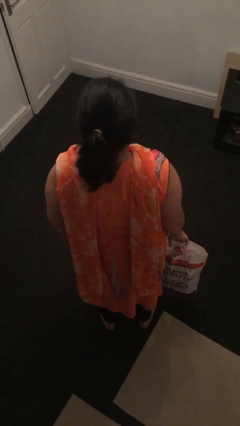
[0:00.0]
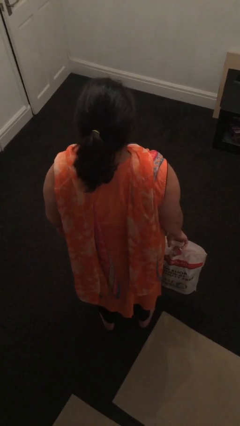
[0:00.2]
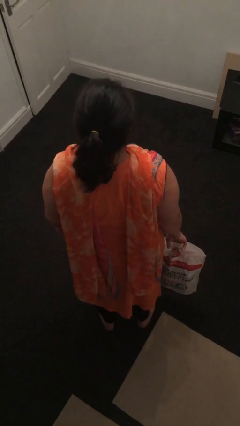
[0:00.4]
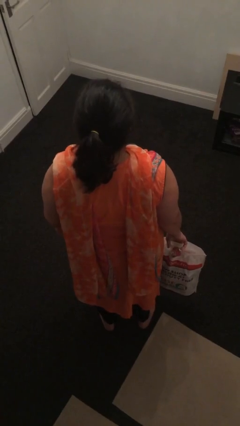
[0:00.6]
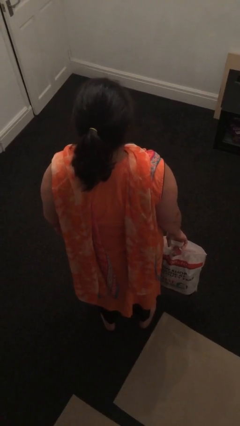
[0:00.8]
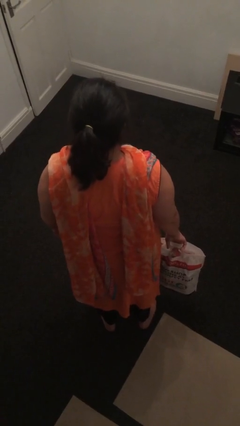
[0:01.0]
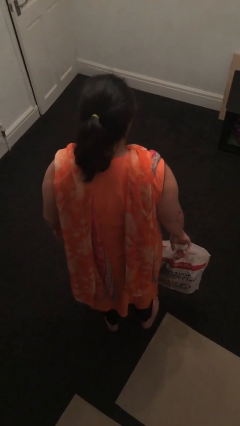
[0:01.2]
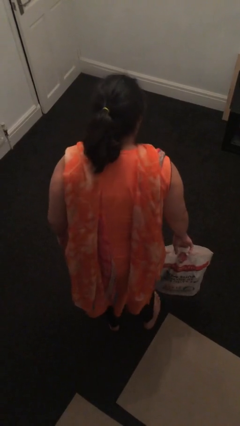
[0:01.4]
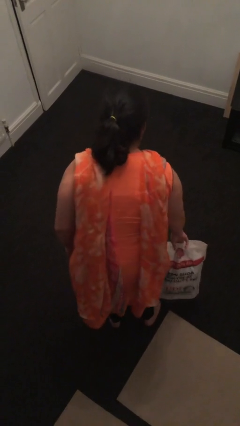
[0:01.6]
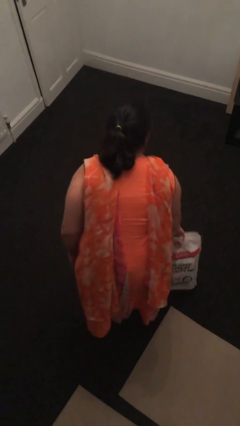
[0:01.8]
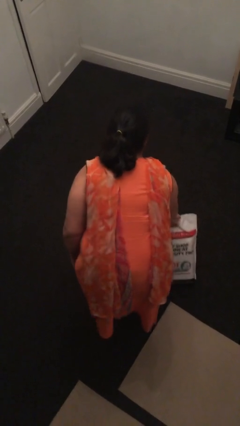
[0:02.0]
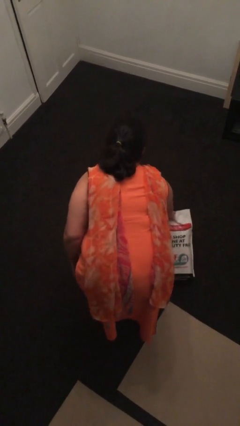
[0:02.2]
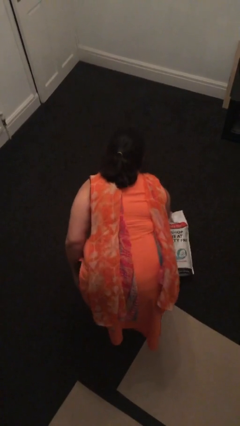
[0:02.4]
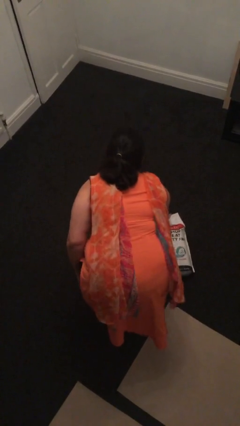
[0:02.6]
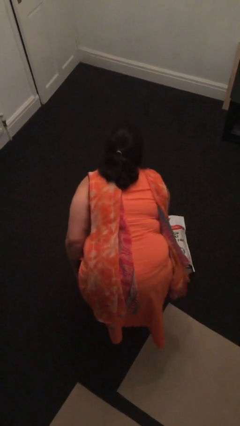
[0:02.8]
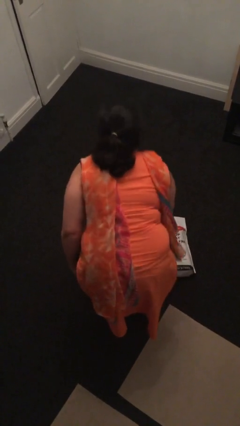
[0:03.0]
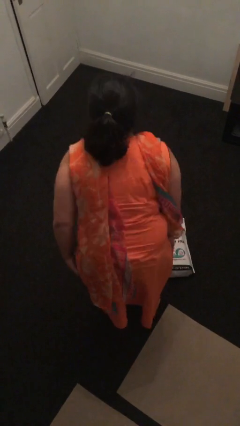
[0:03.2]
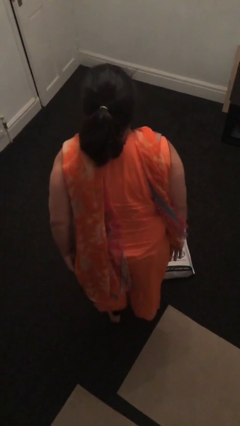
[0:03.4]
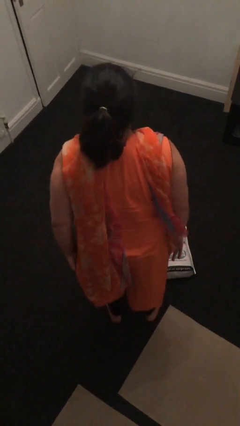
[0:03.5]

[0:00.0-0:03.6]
person puts down object on floor

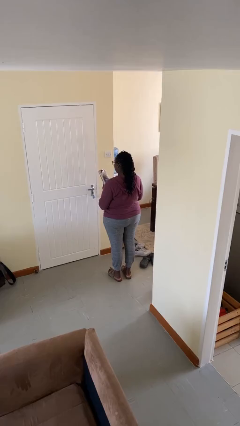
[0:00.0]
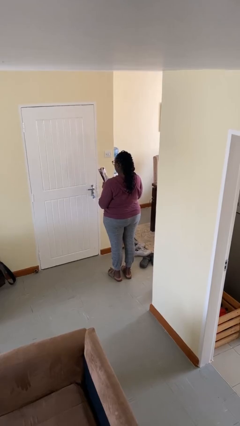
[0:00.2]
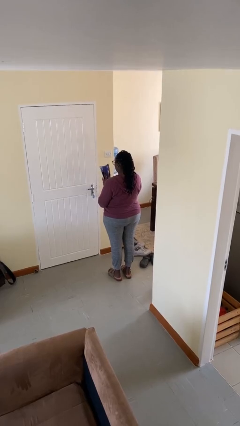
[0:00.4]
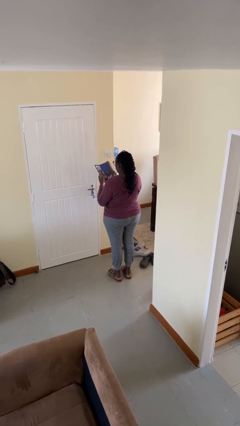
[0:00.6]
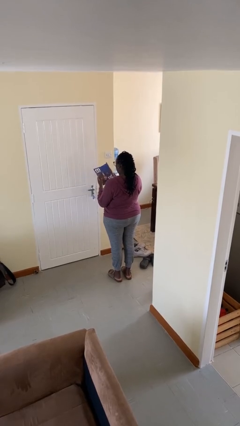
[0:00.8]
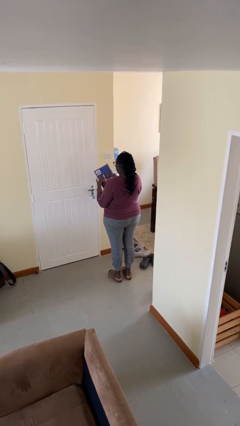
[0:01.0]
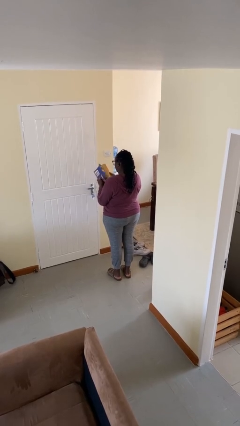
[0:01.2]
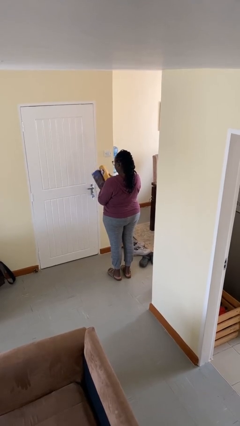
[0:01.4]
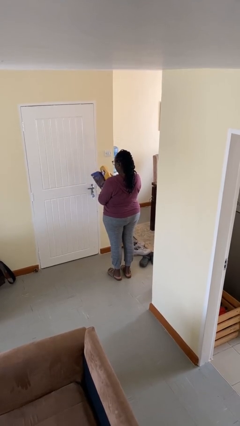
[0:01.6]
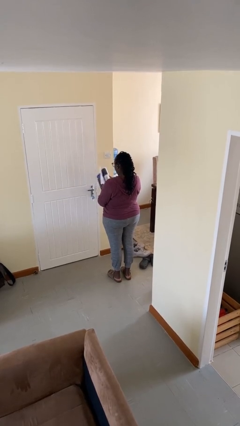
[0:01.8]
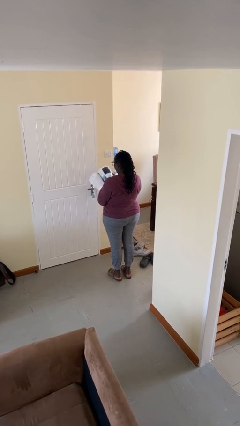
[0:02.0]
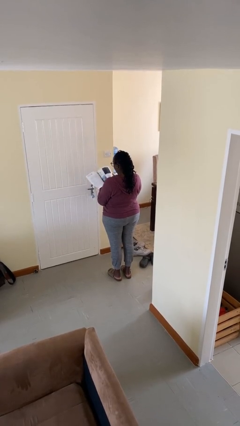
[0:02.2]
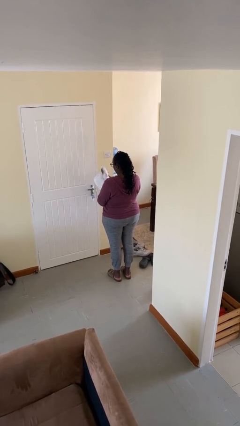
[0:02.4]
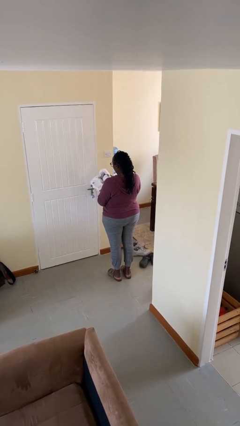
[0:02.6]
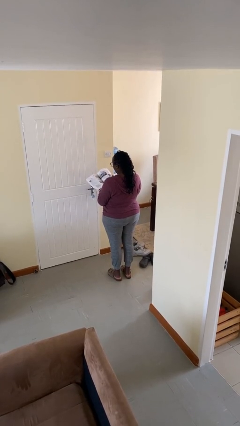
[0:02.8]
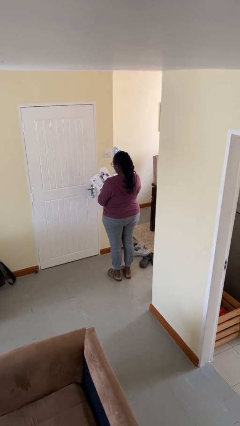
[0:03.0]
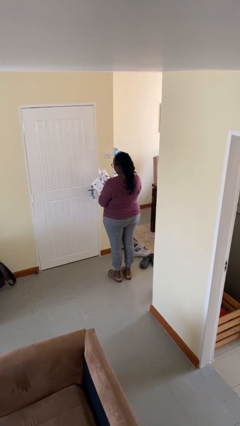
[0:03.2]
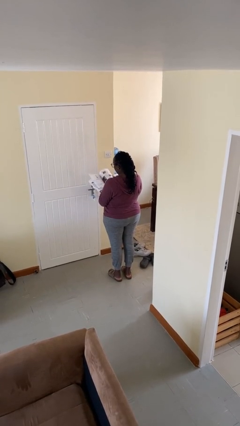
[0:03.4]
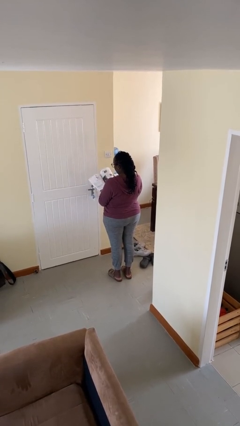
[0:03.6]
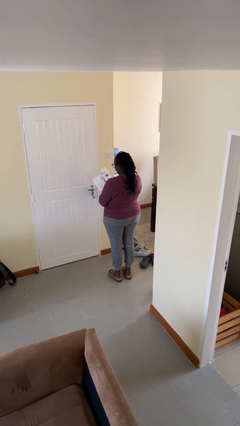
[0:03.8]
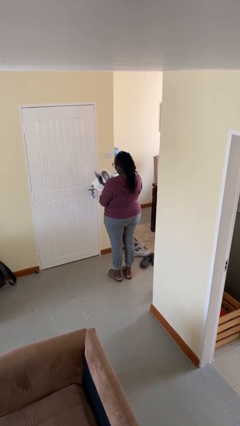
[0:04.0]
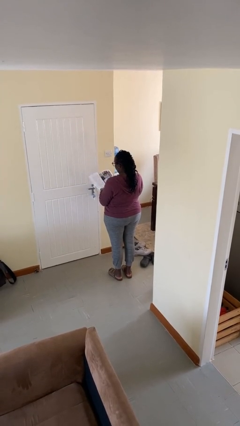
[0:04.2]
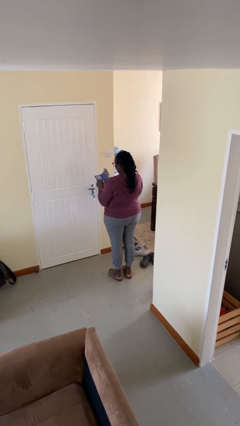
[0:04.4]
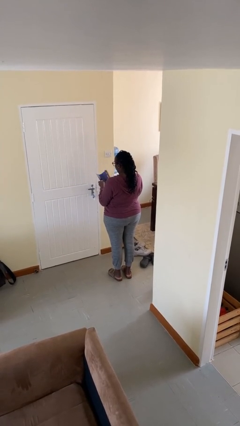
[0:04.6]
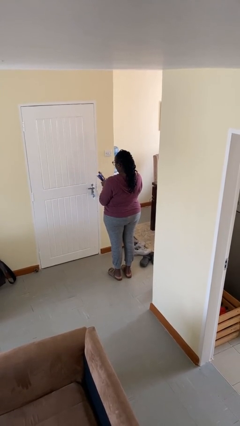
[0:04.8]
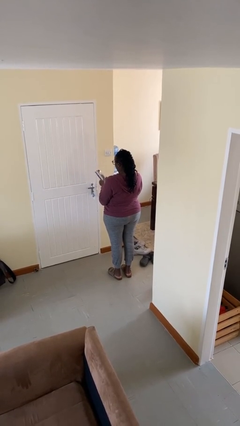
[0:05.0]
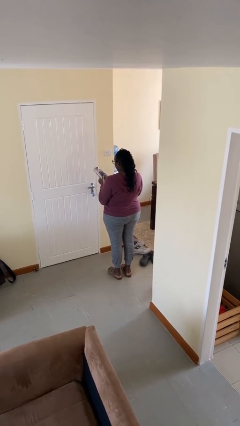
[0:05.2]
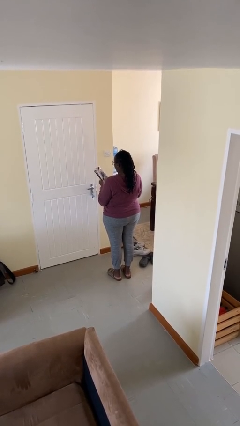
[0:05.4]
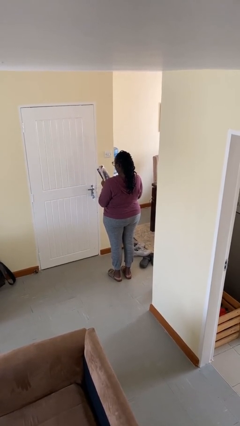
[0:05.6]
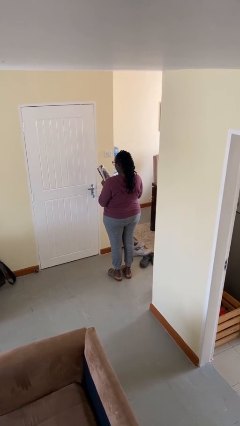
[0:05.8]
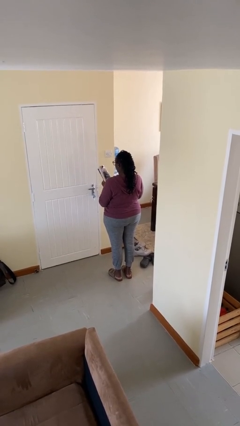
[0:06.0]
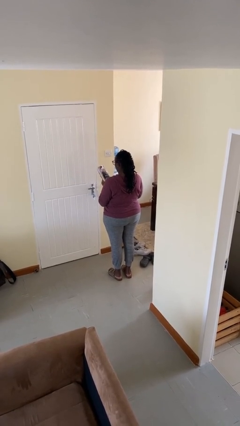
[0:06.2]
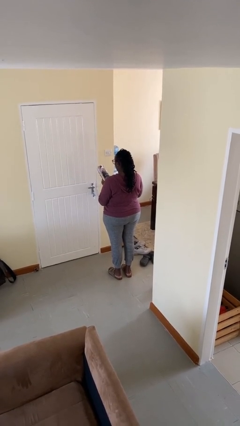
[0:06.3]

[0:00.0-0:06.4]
person reads magazine

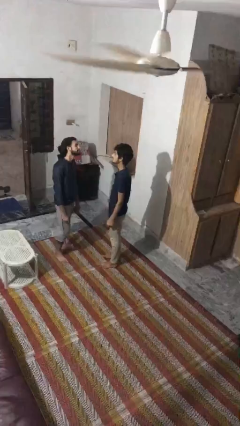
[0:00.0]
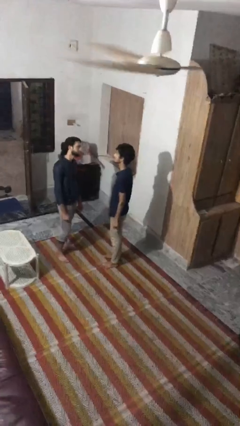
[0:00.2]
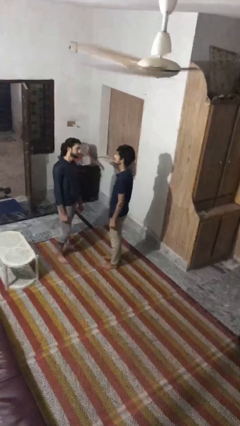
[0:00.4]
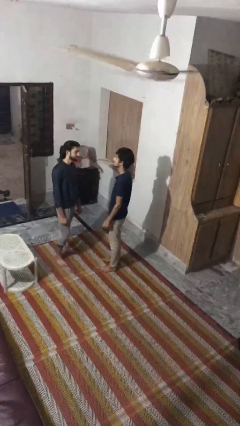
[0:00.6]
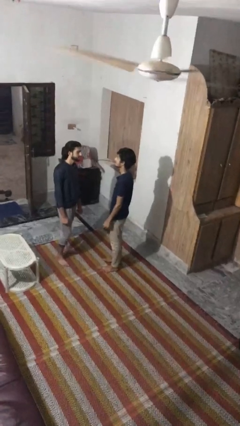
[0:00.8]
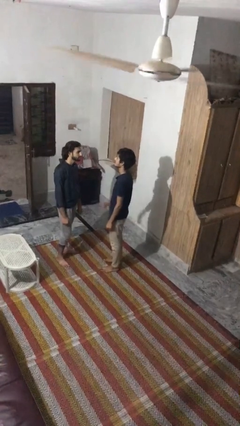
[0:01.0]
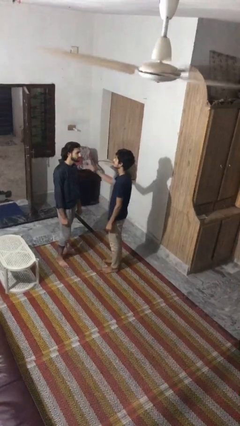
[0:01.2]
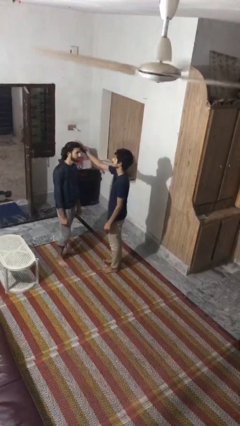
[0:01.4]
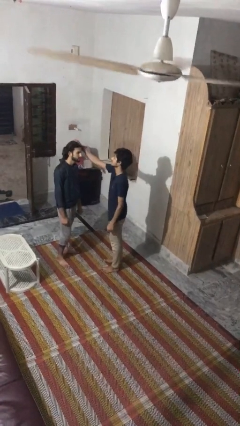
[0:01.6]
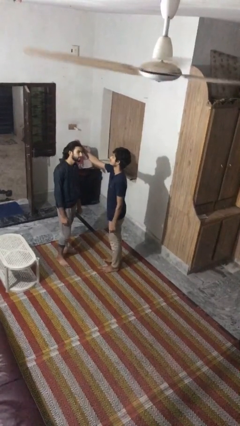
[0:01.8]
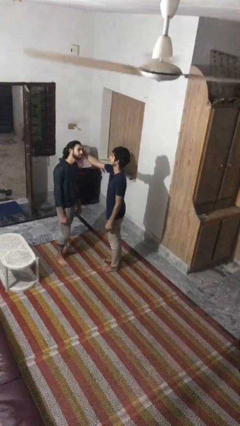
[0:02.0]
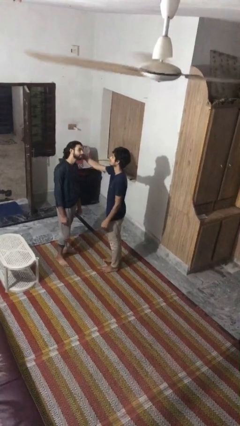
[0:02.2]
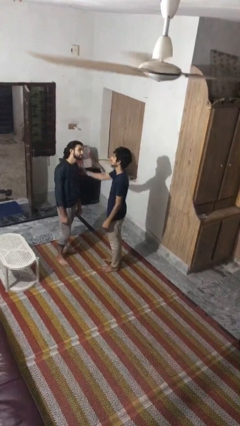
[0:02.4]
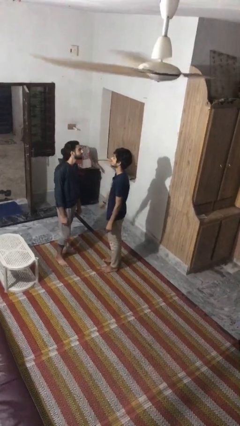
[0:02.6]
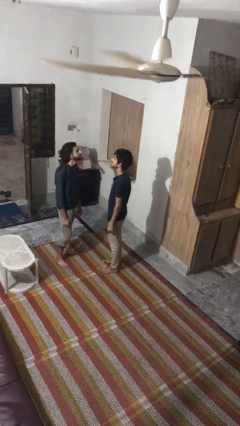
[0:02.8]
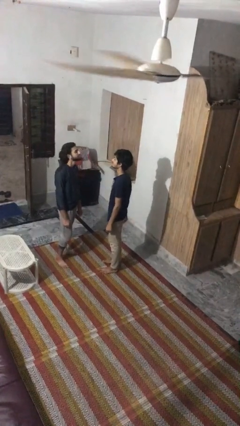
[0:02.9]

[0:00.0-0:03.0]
person grabs person by hair

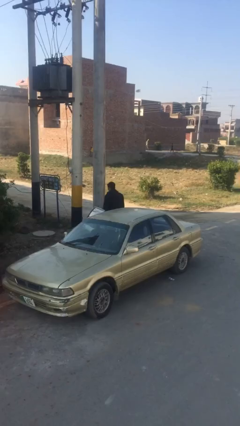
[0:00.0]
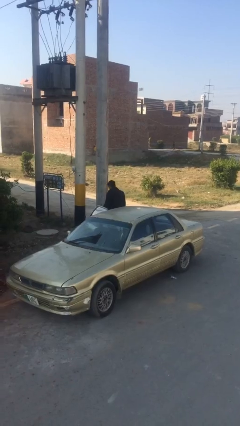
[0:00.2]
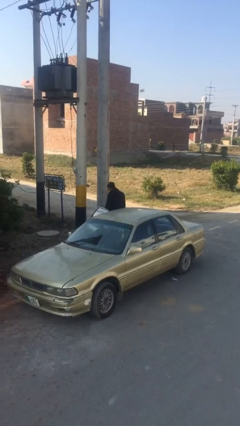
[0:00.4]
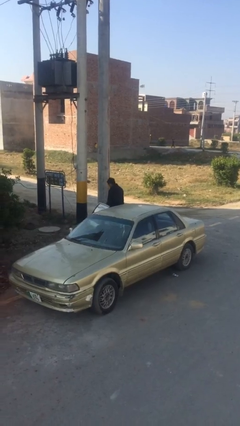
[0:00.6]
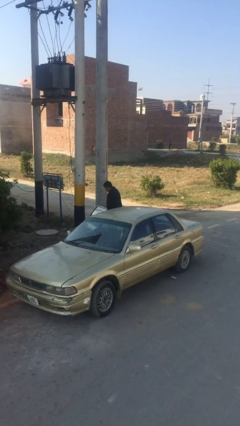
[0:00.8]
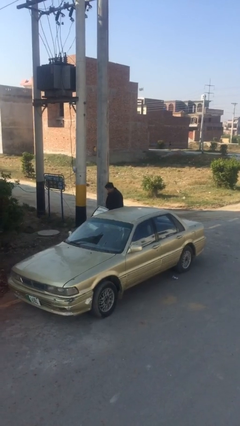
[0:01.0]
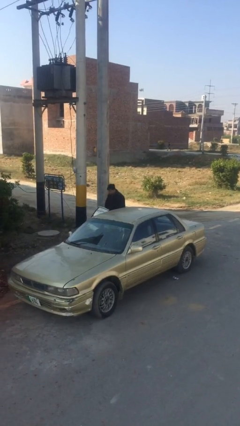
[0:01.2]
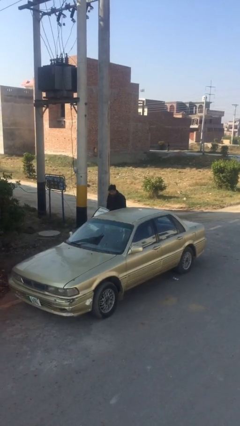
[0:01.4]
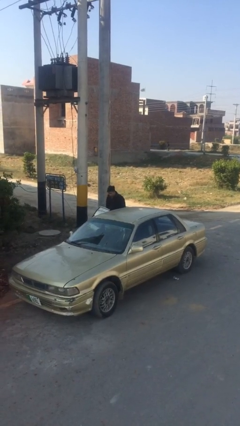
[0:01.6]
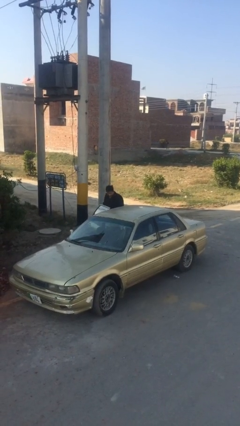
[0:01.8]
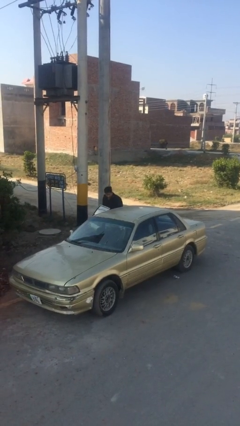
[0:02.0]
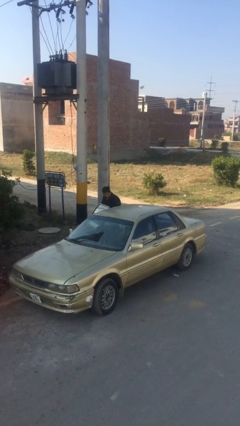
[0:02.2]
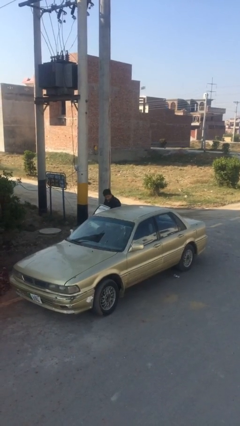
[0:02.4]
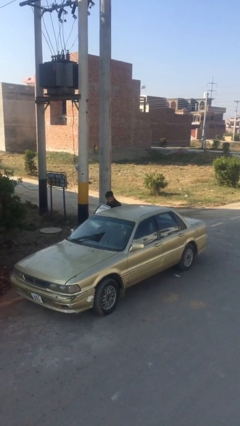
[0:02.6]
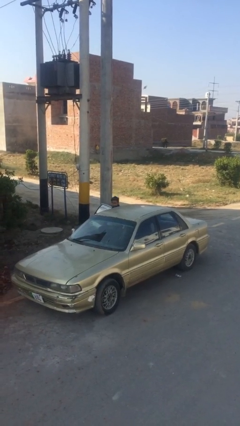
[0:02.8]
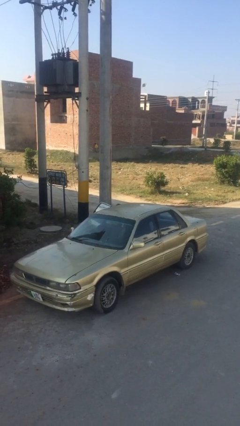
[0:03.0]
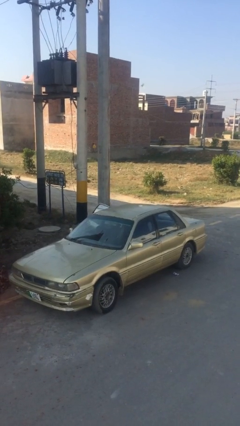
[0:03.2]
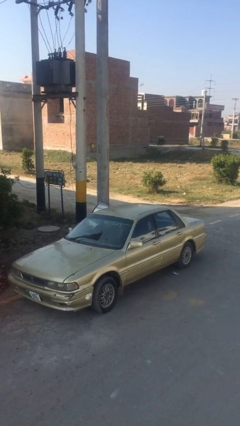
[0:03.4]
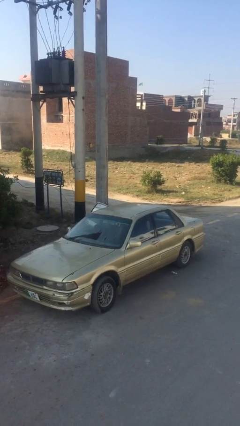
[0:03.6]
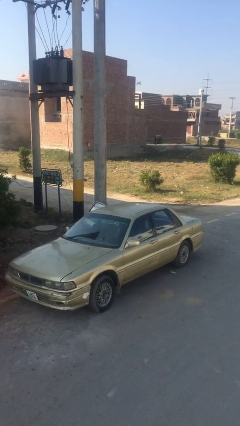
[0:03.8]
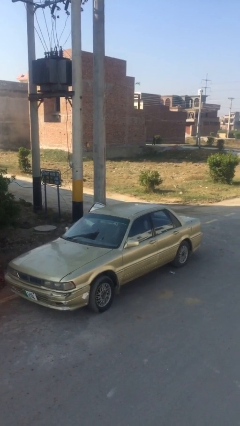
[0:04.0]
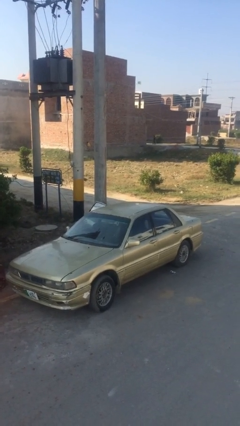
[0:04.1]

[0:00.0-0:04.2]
person enters car

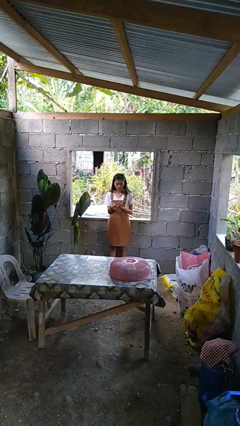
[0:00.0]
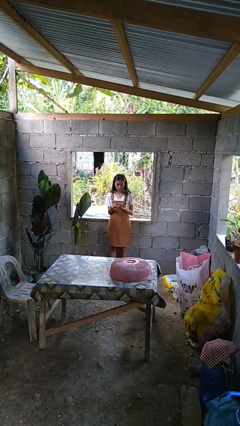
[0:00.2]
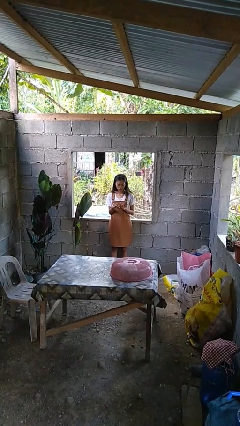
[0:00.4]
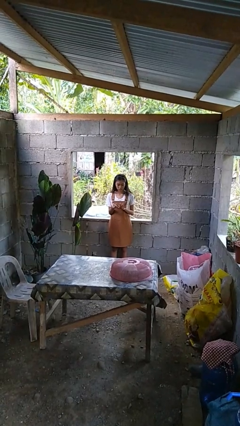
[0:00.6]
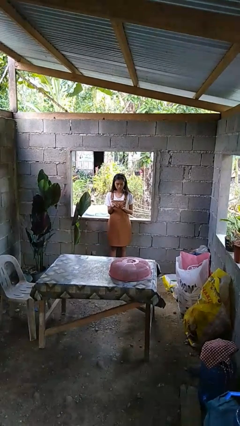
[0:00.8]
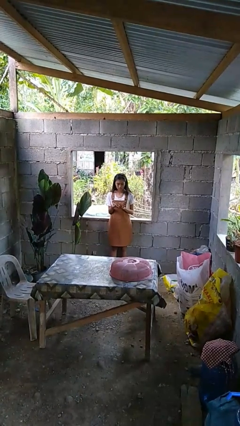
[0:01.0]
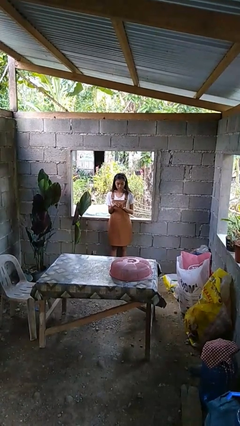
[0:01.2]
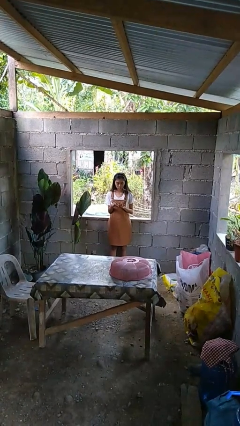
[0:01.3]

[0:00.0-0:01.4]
person clips fingernails
